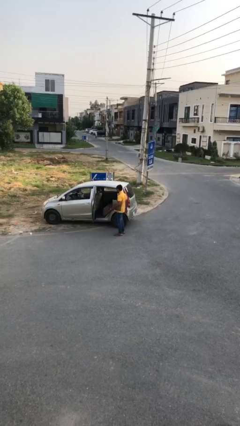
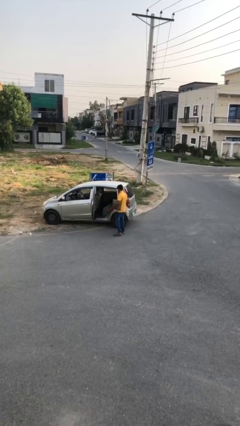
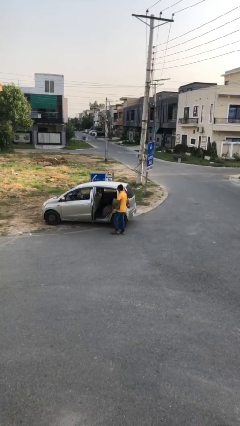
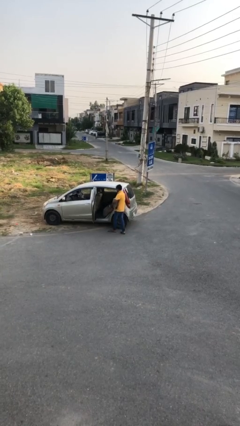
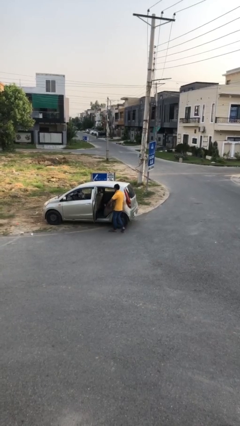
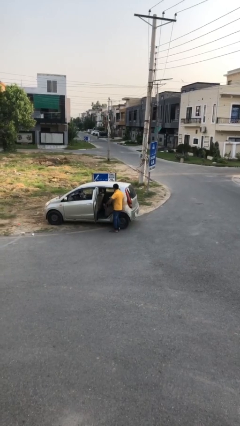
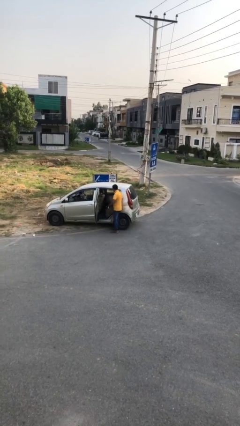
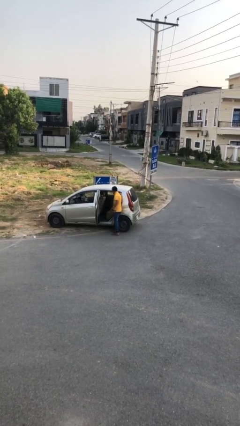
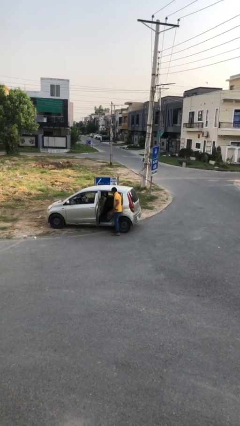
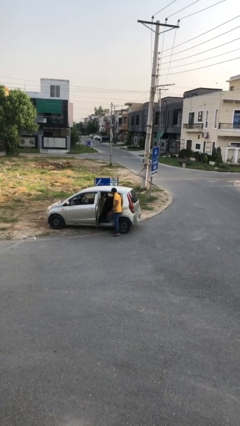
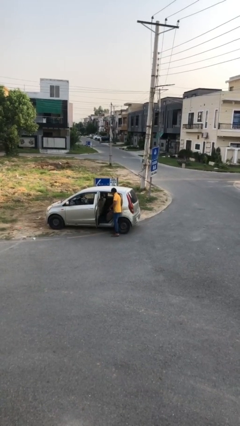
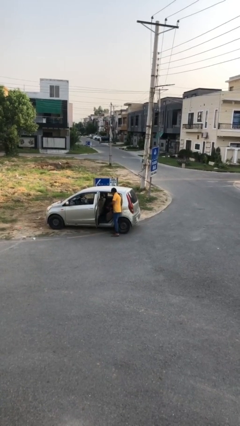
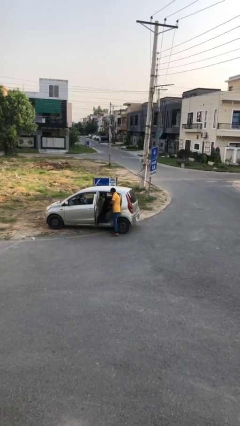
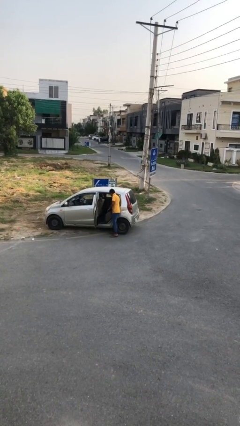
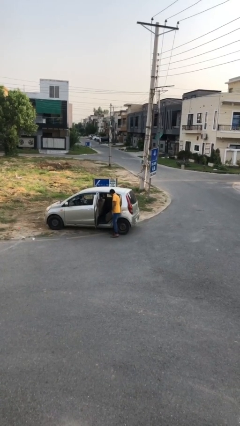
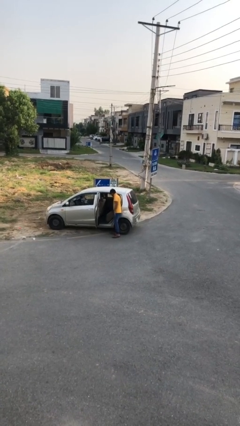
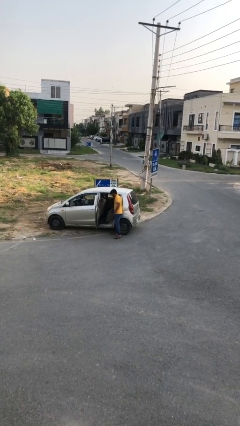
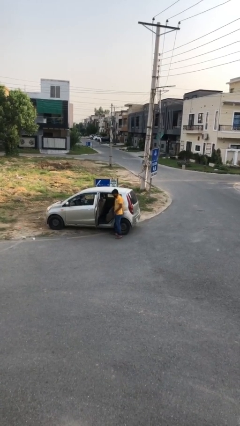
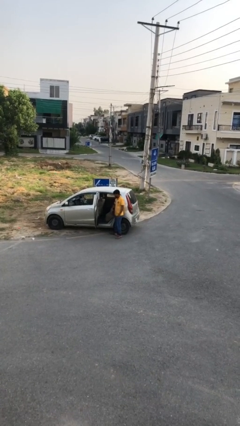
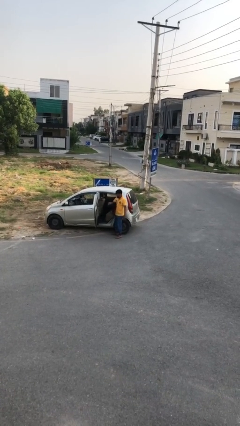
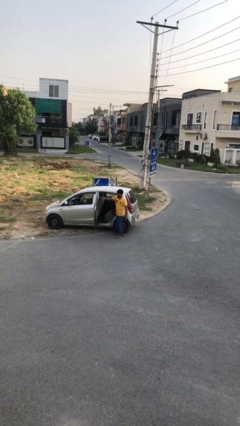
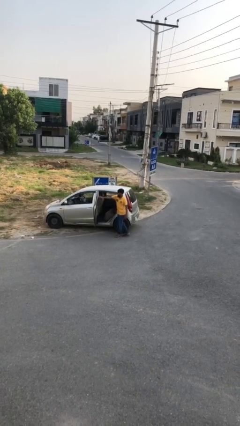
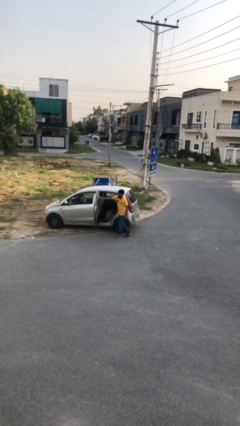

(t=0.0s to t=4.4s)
person loads car

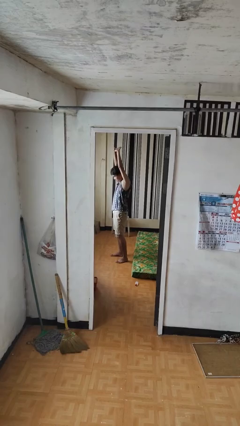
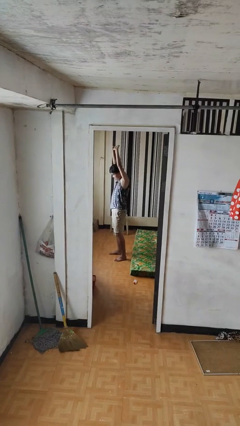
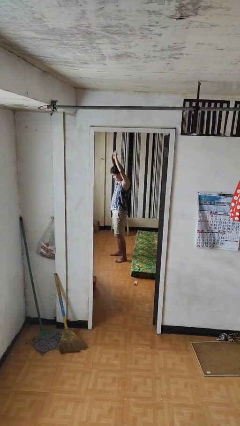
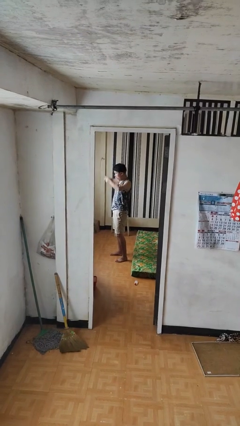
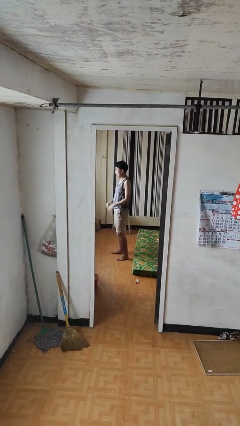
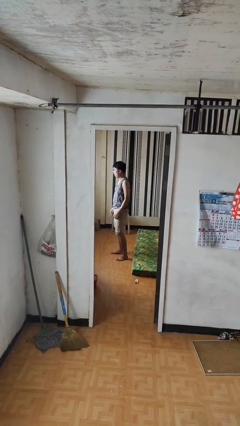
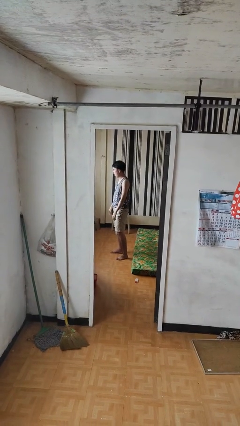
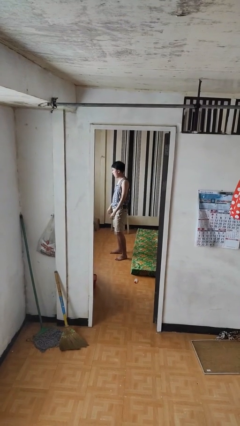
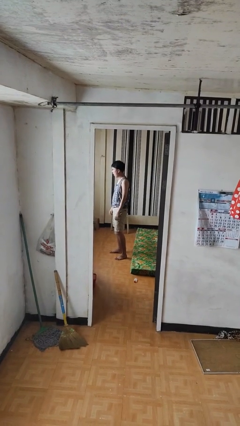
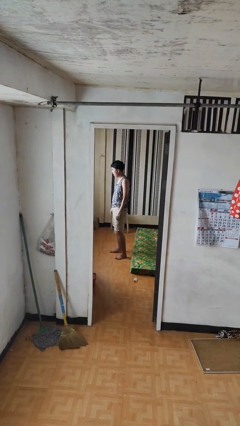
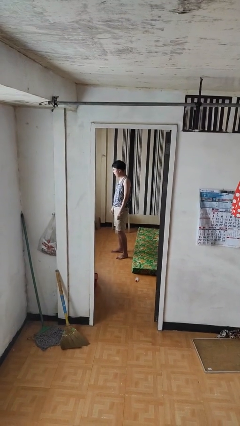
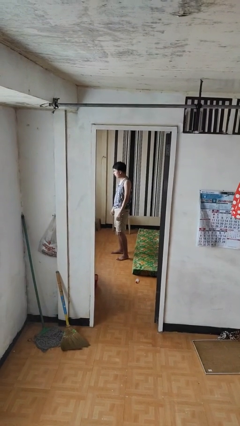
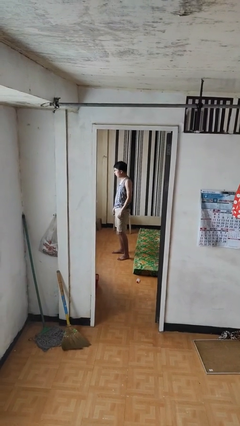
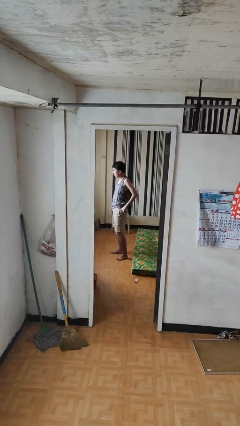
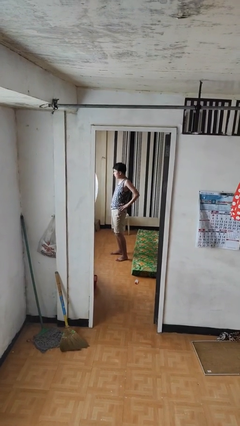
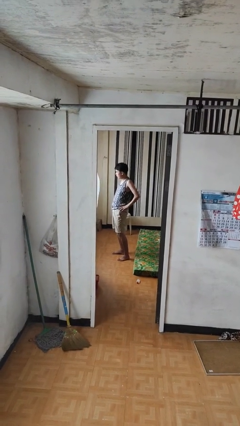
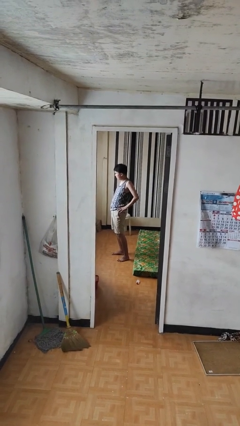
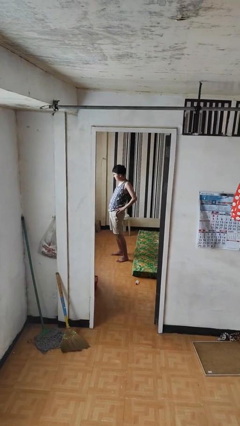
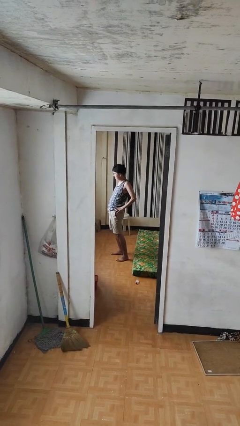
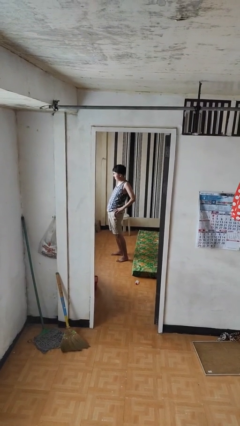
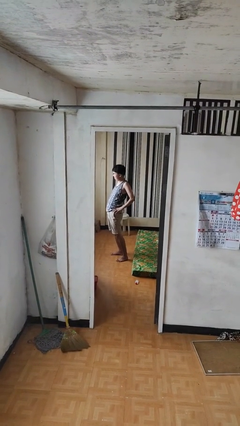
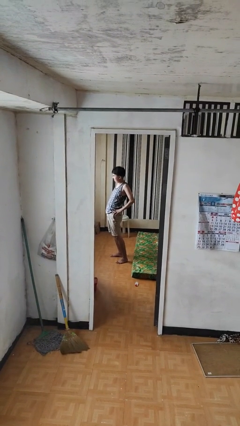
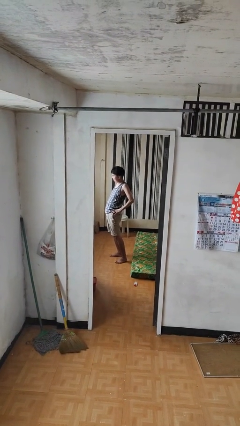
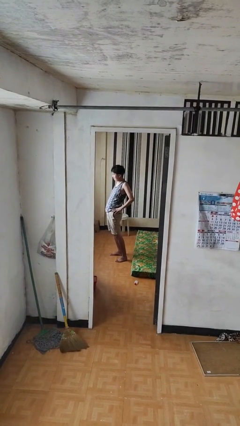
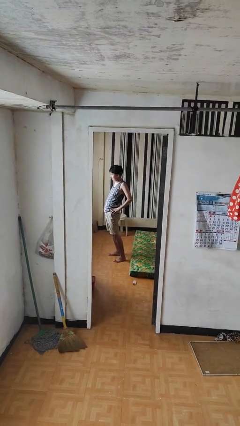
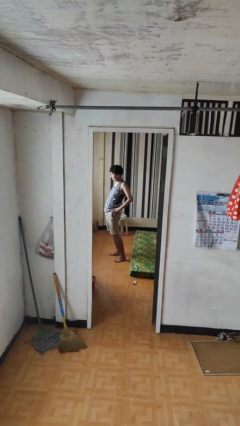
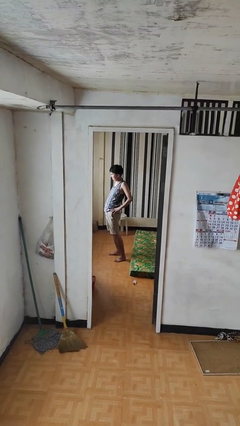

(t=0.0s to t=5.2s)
person stretches back

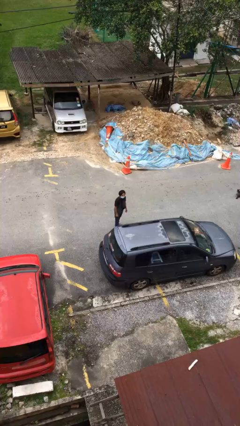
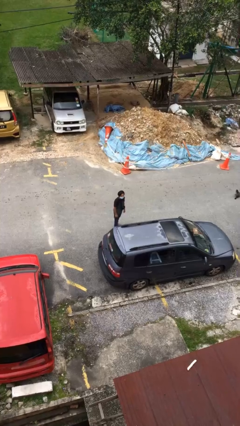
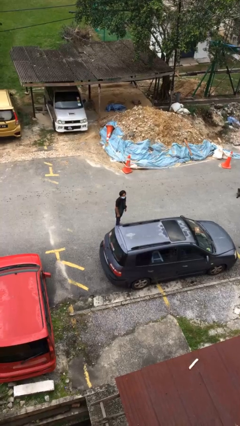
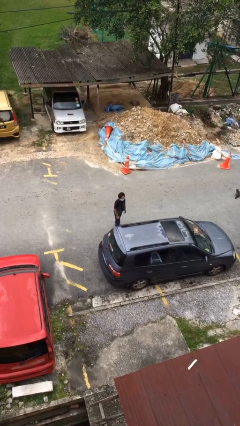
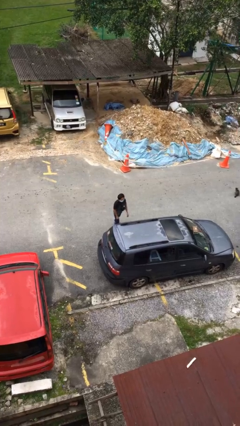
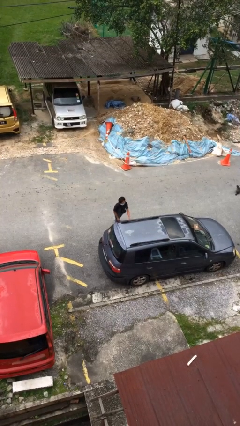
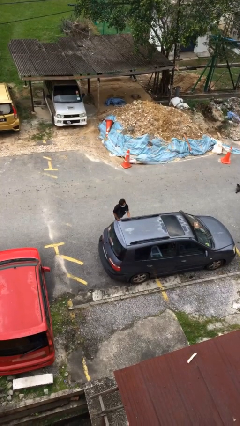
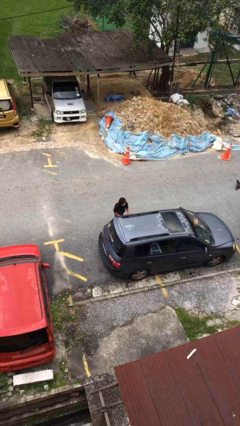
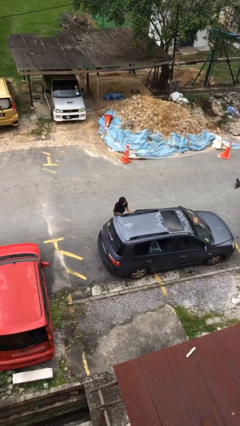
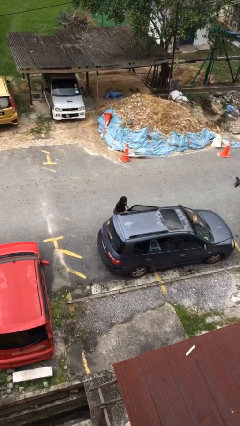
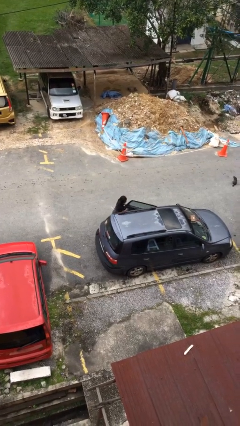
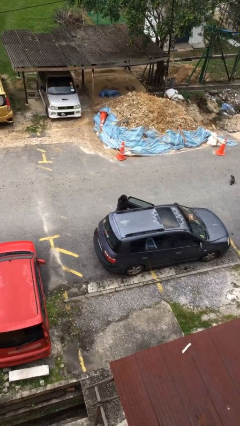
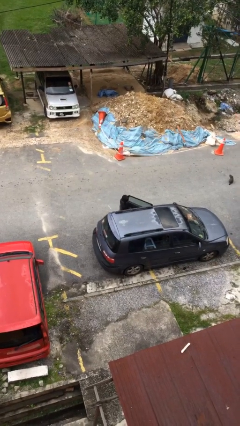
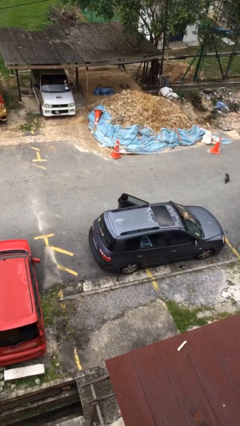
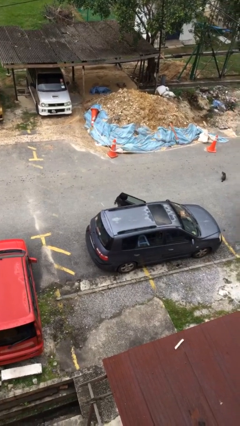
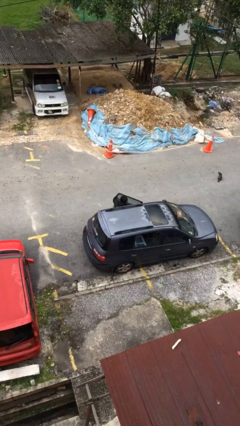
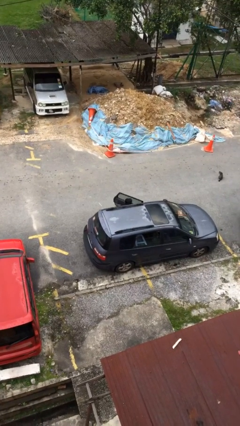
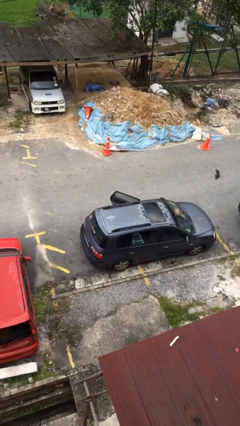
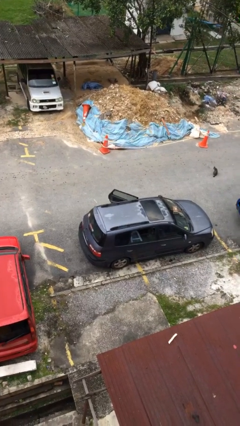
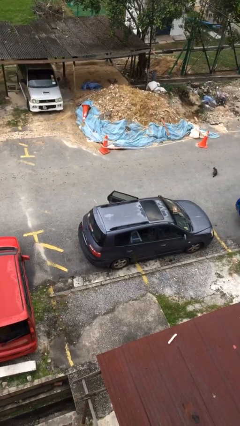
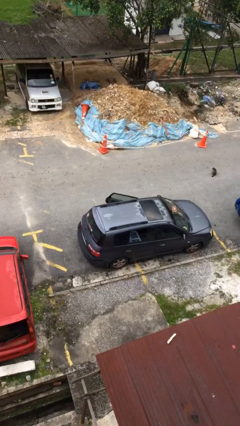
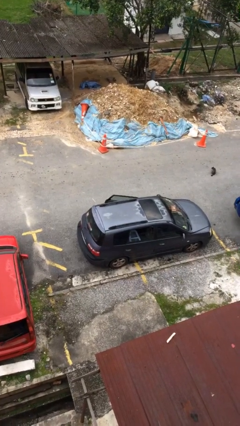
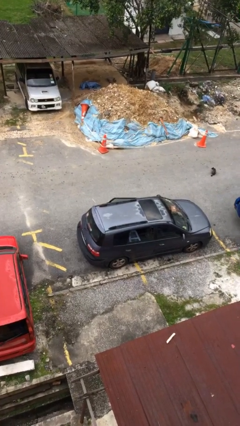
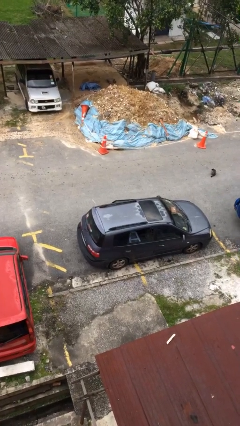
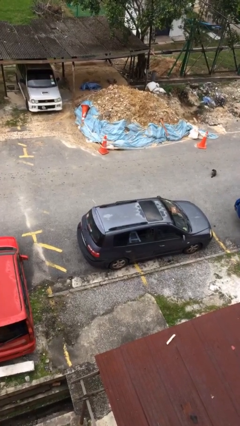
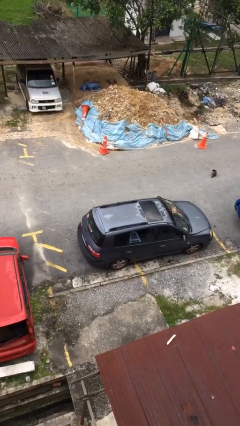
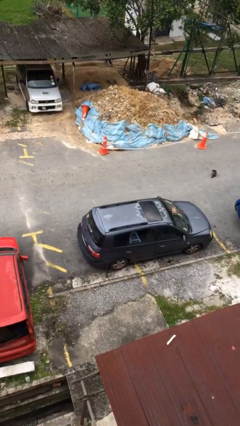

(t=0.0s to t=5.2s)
person enters car

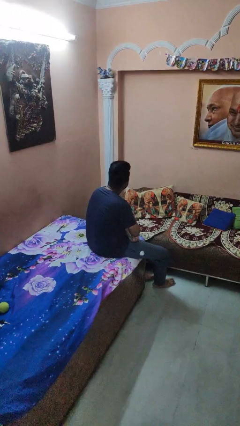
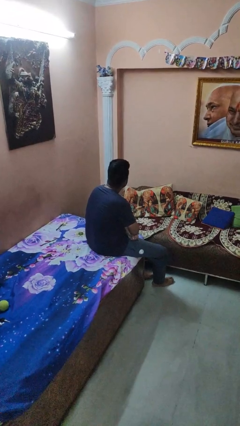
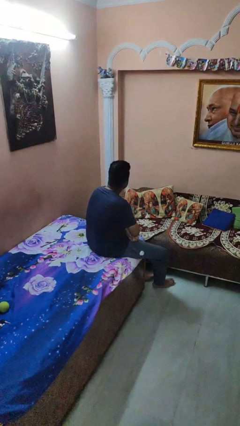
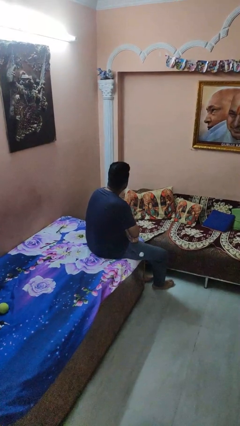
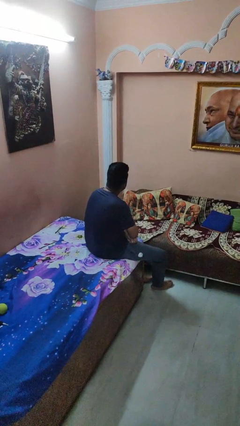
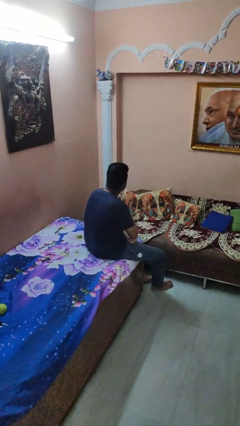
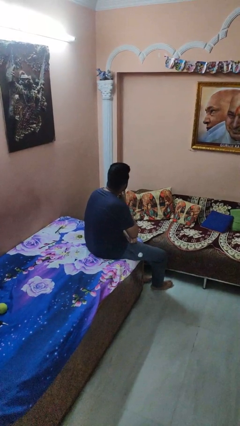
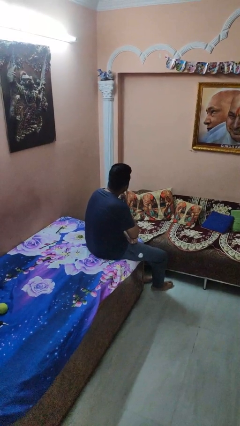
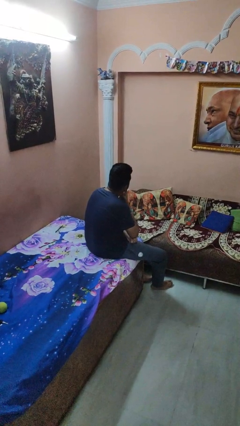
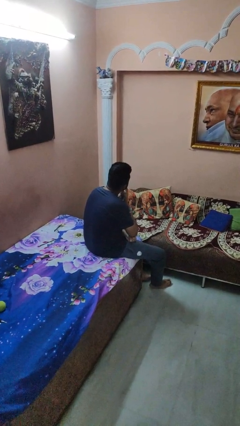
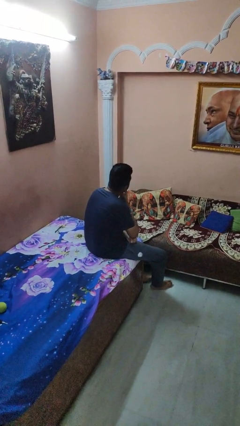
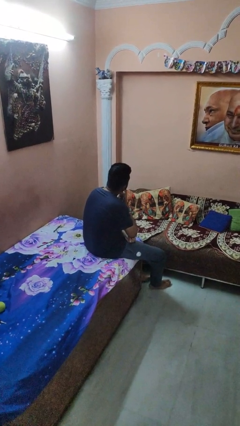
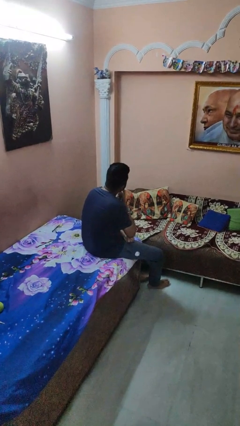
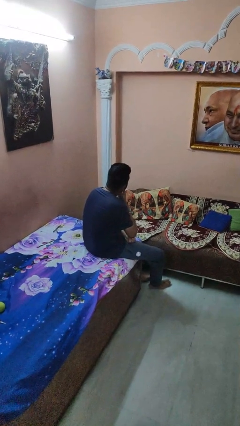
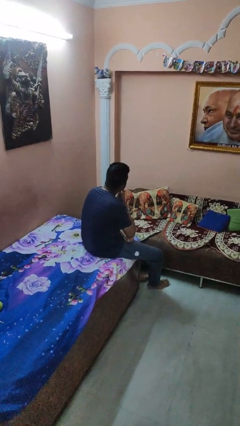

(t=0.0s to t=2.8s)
person strokes chin

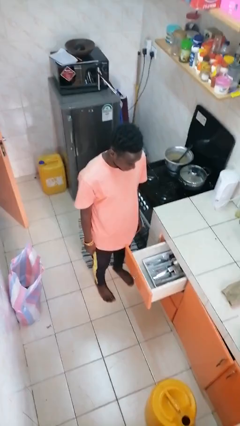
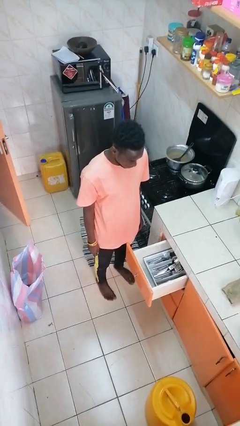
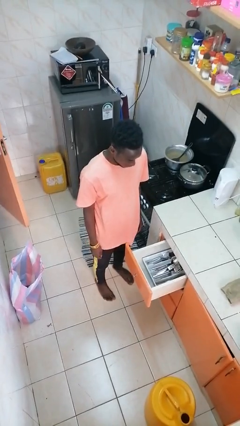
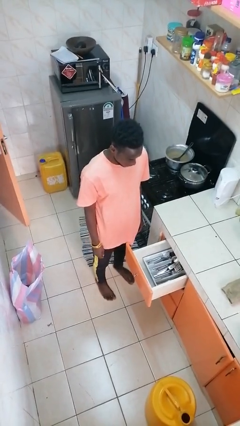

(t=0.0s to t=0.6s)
person opens kitchen drawer
